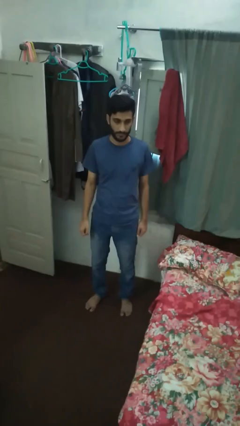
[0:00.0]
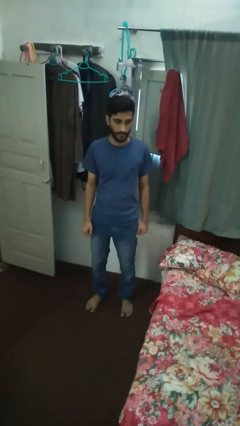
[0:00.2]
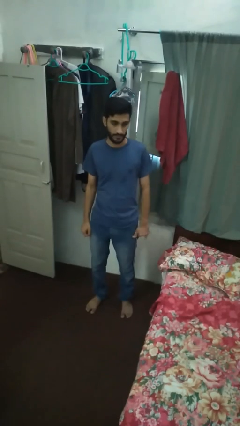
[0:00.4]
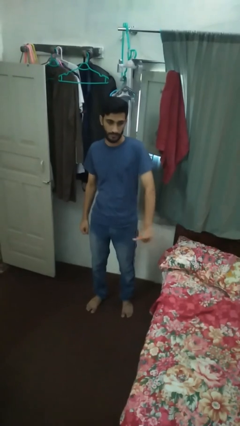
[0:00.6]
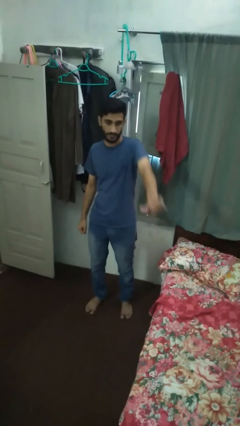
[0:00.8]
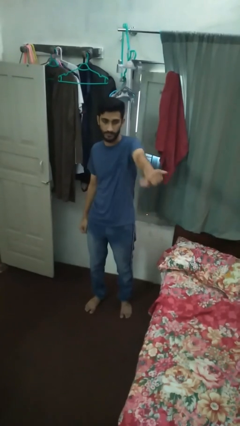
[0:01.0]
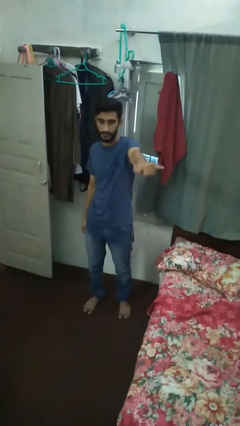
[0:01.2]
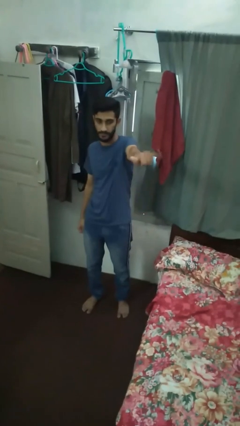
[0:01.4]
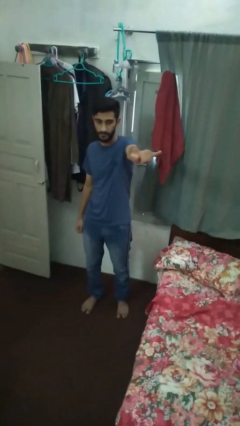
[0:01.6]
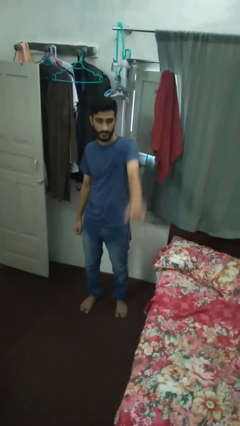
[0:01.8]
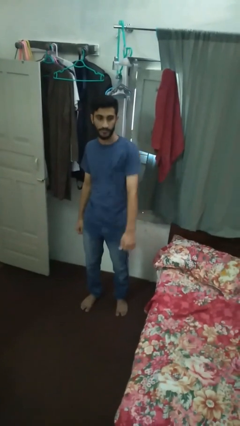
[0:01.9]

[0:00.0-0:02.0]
person gestures hang loose

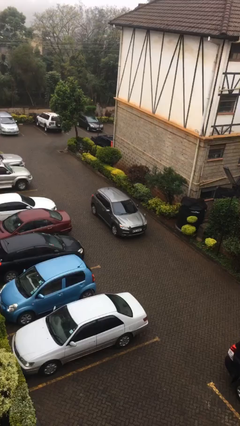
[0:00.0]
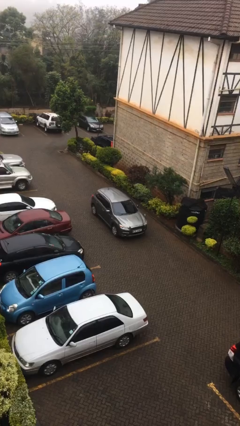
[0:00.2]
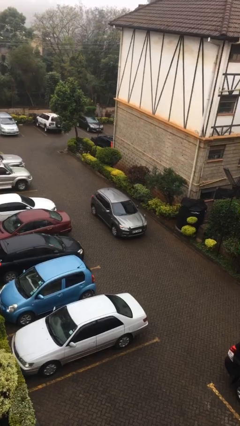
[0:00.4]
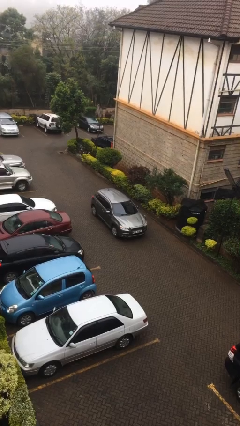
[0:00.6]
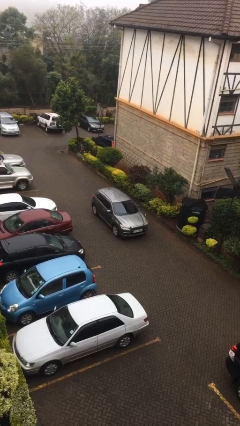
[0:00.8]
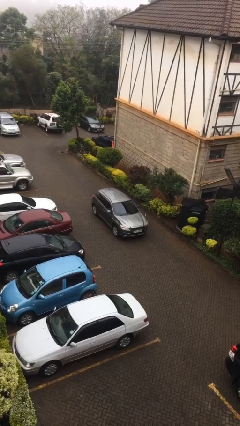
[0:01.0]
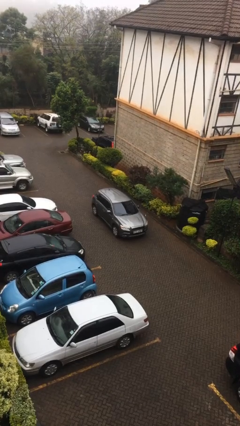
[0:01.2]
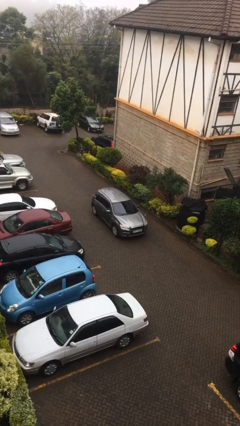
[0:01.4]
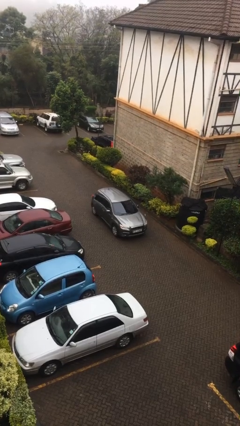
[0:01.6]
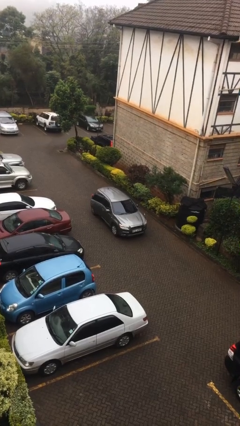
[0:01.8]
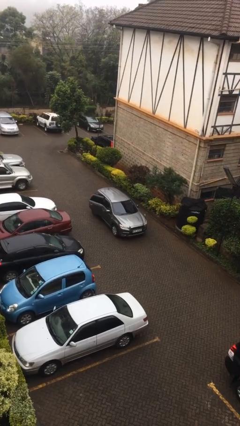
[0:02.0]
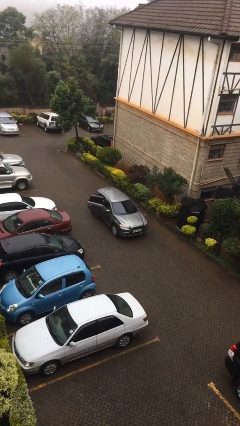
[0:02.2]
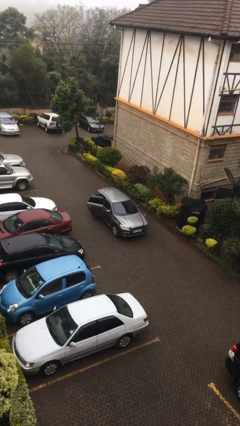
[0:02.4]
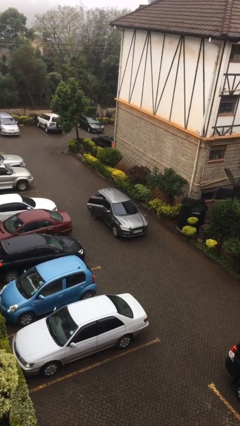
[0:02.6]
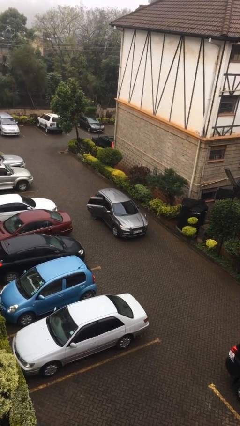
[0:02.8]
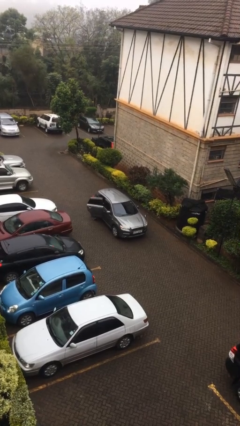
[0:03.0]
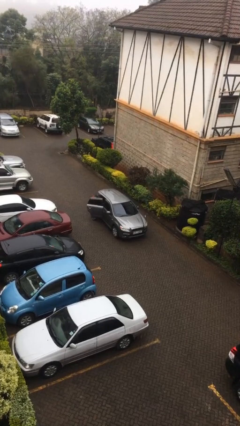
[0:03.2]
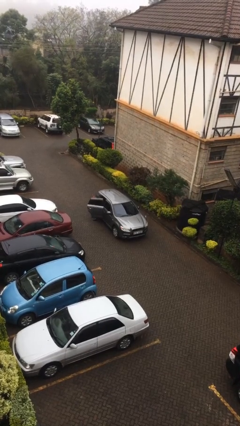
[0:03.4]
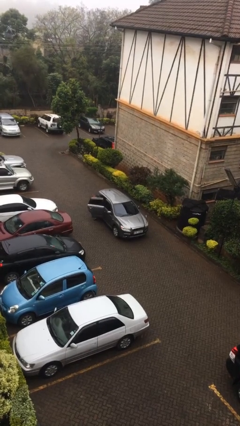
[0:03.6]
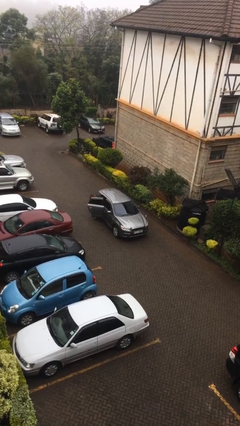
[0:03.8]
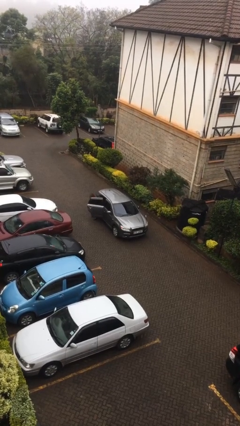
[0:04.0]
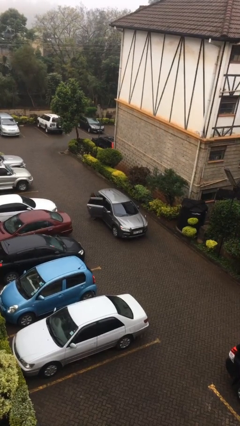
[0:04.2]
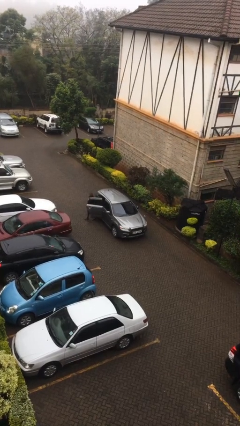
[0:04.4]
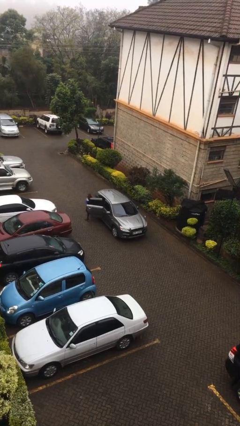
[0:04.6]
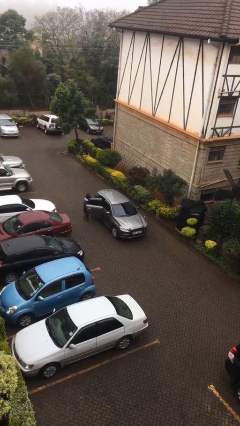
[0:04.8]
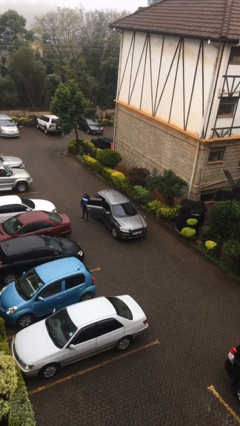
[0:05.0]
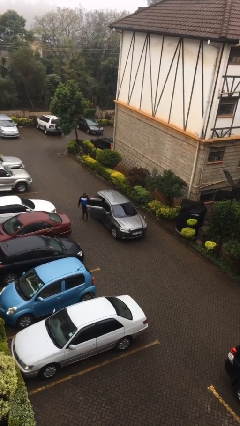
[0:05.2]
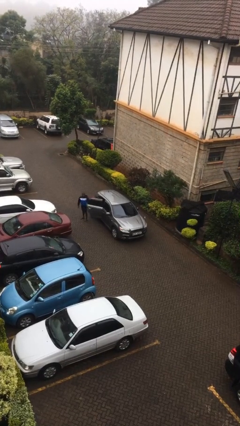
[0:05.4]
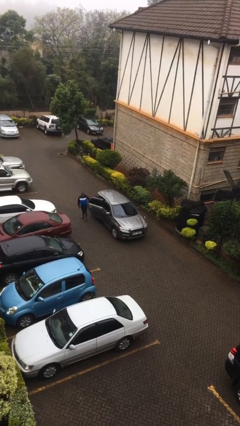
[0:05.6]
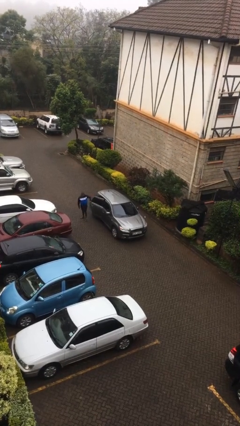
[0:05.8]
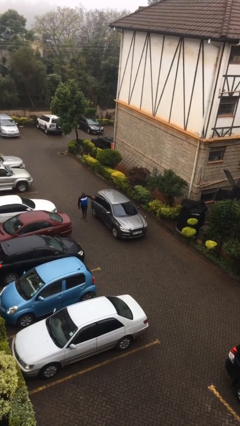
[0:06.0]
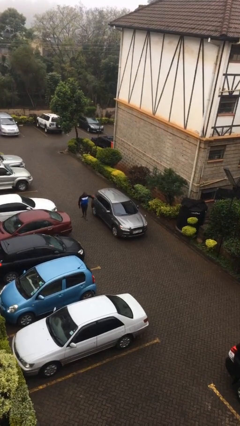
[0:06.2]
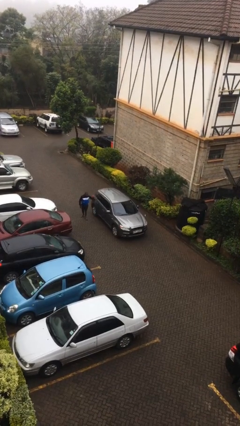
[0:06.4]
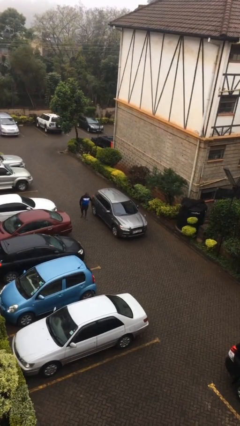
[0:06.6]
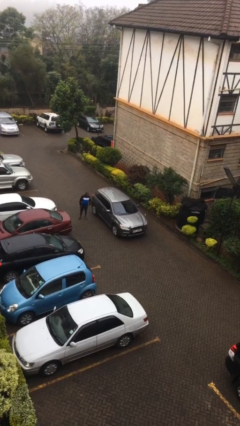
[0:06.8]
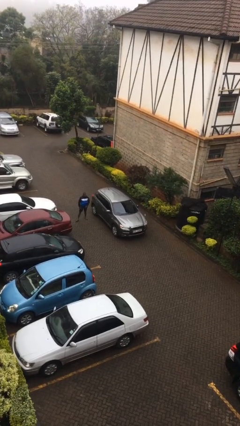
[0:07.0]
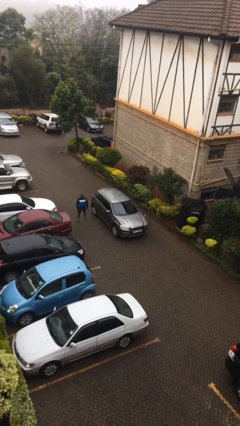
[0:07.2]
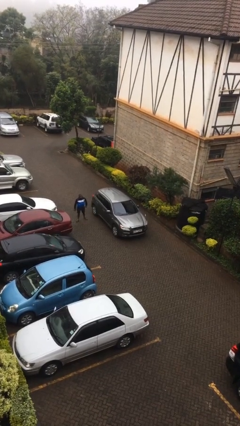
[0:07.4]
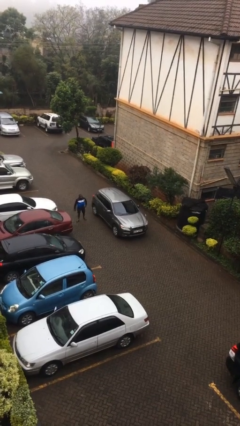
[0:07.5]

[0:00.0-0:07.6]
car drops off person

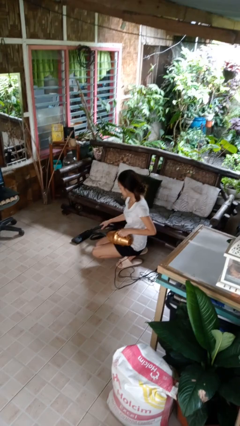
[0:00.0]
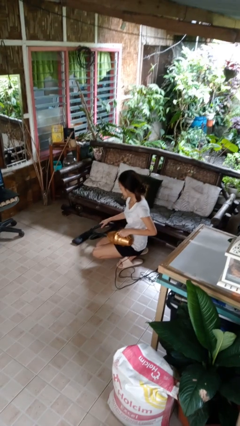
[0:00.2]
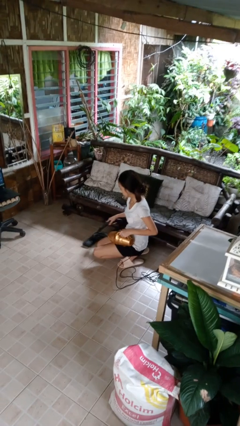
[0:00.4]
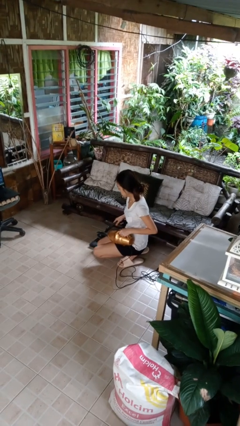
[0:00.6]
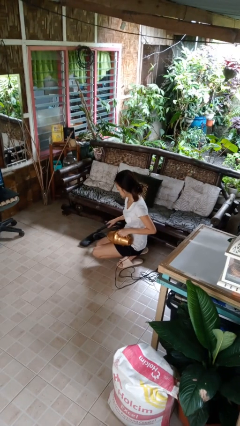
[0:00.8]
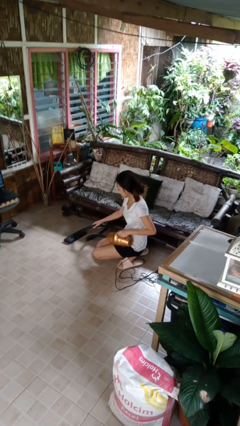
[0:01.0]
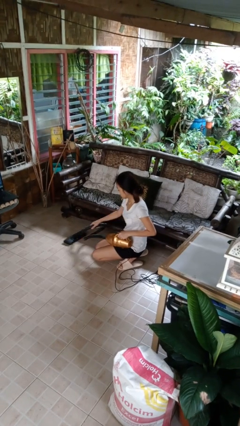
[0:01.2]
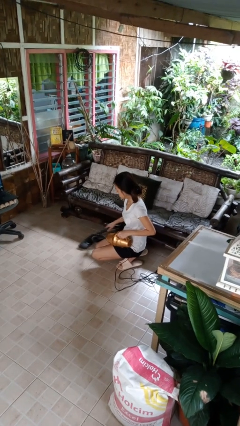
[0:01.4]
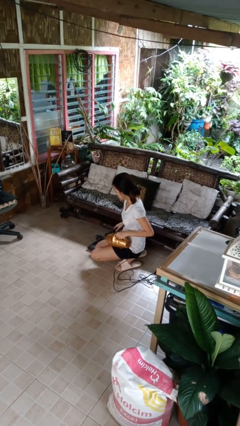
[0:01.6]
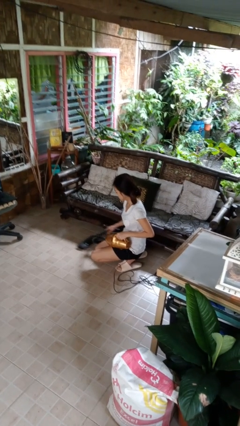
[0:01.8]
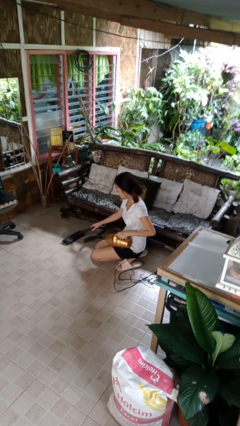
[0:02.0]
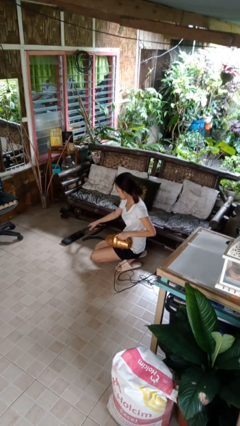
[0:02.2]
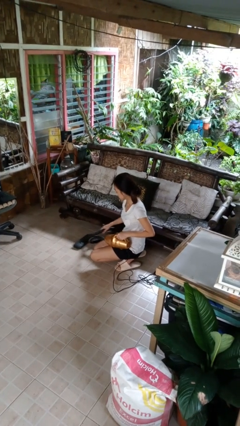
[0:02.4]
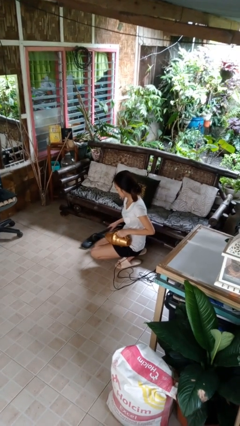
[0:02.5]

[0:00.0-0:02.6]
person vacuums carpet

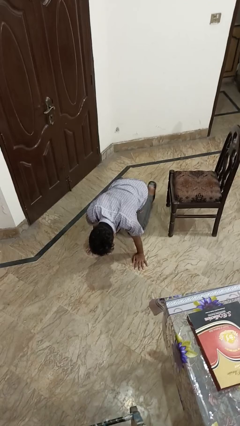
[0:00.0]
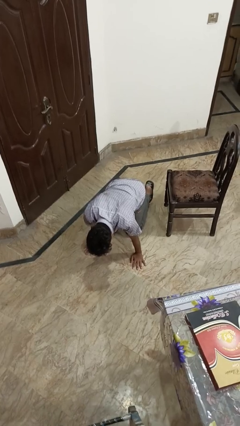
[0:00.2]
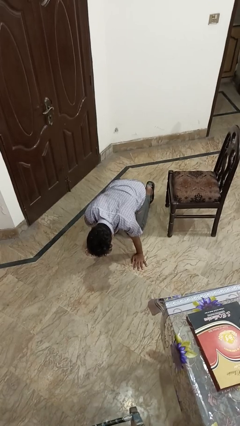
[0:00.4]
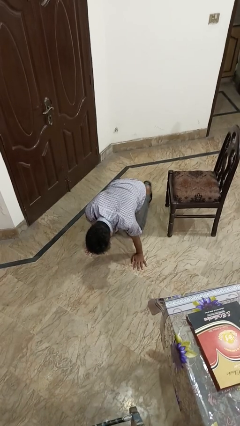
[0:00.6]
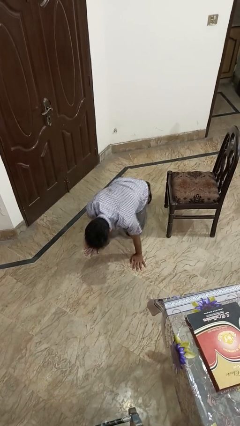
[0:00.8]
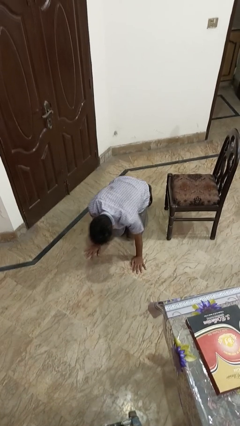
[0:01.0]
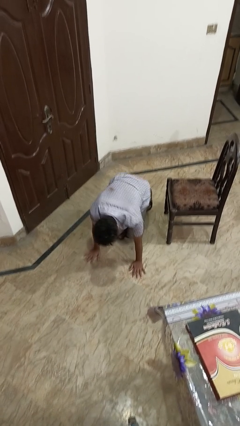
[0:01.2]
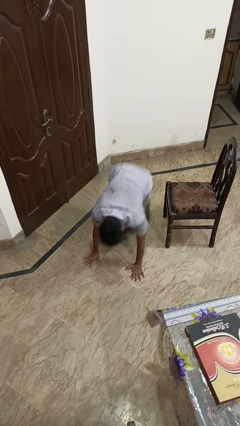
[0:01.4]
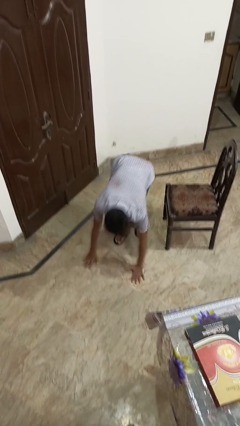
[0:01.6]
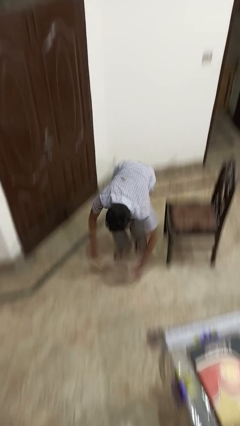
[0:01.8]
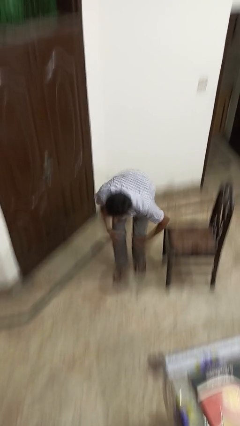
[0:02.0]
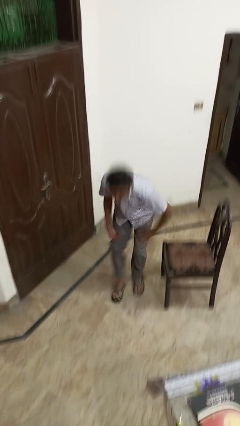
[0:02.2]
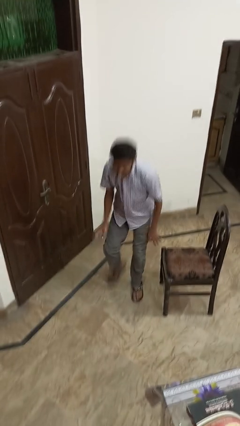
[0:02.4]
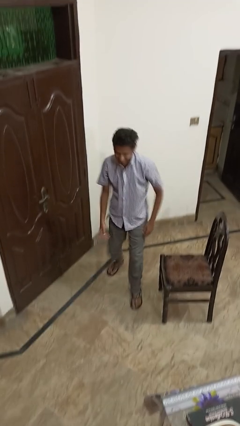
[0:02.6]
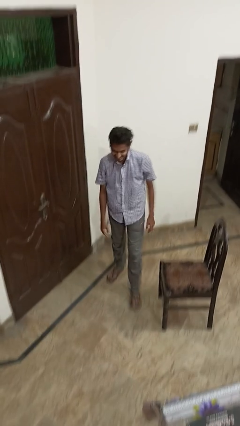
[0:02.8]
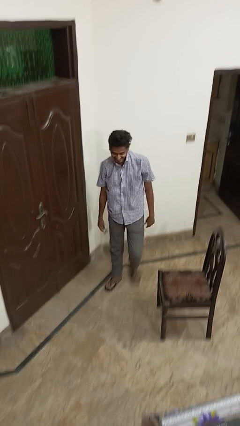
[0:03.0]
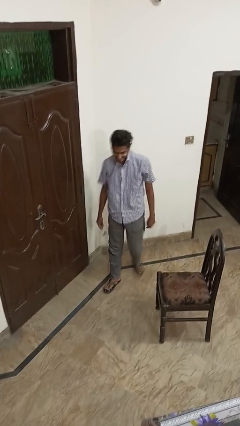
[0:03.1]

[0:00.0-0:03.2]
person stands up from floor

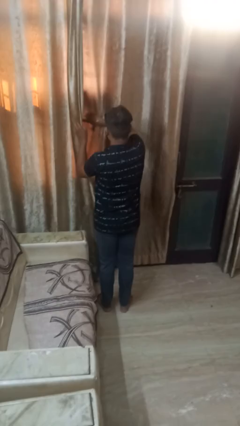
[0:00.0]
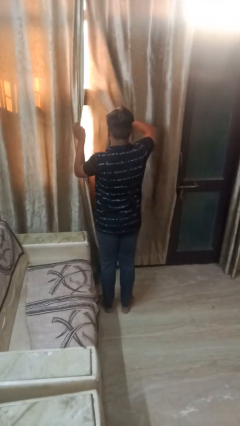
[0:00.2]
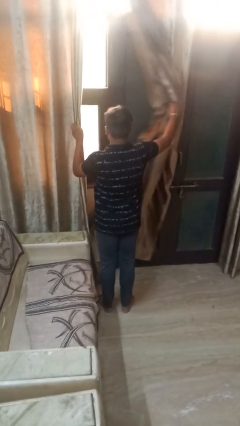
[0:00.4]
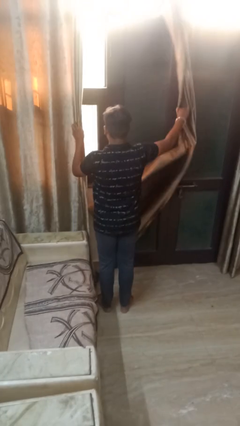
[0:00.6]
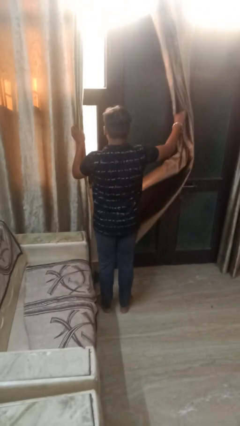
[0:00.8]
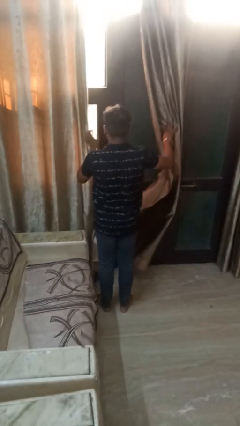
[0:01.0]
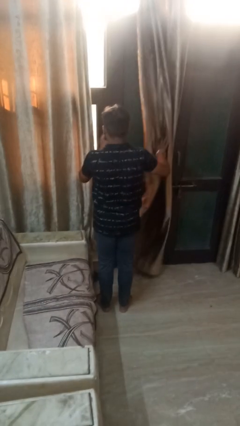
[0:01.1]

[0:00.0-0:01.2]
person opens curtains

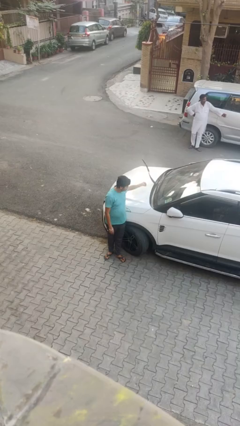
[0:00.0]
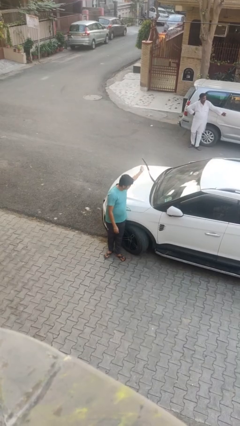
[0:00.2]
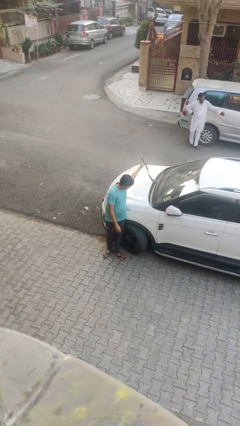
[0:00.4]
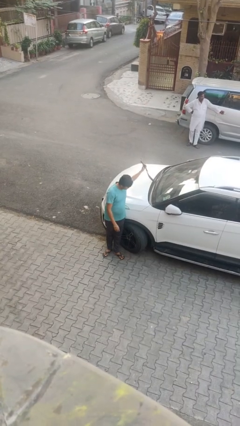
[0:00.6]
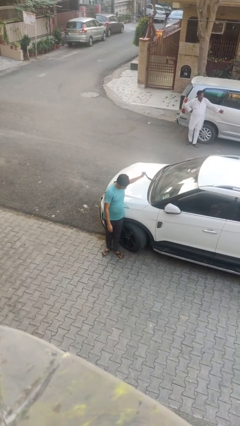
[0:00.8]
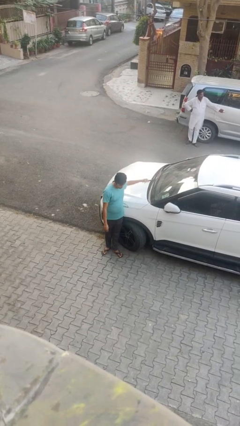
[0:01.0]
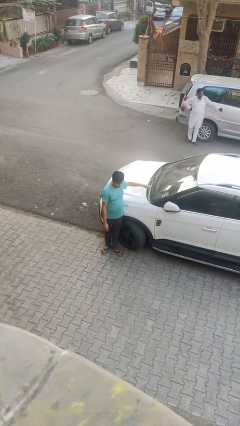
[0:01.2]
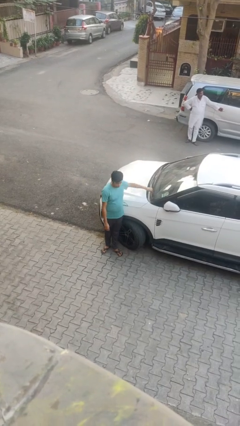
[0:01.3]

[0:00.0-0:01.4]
person flips down car wipers
